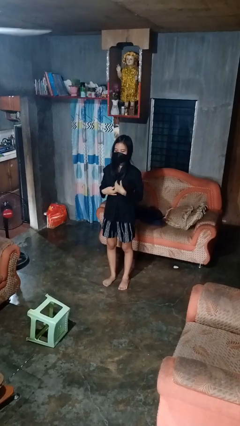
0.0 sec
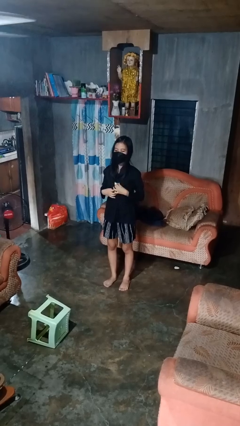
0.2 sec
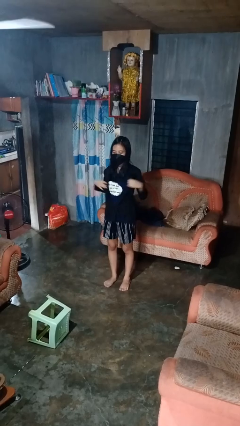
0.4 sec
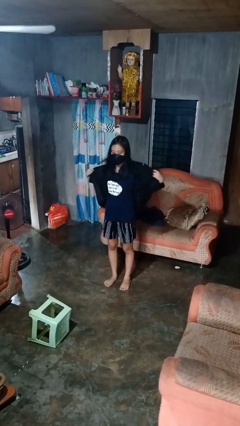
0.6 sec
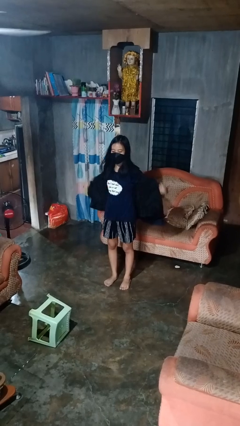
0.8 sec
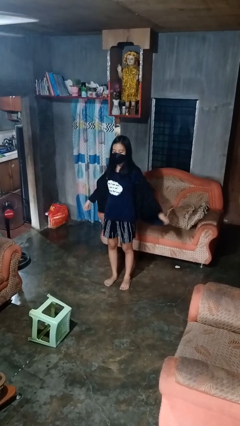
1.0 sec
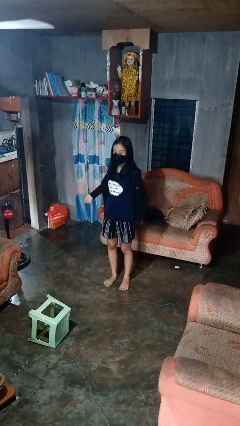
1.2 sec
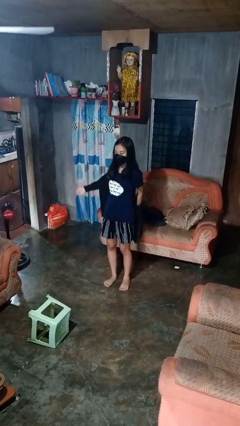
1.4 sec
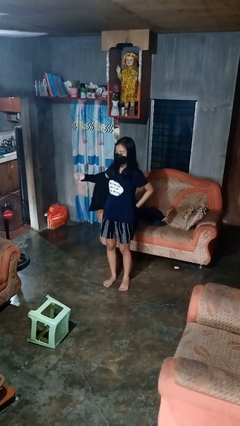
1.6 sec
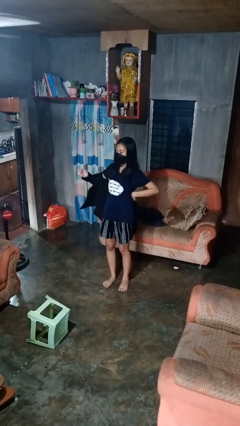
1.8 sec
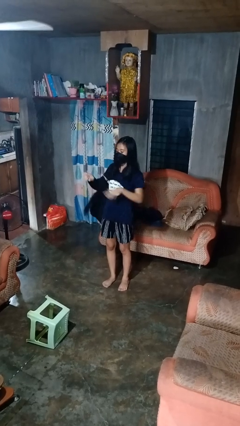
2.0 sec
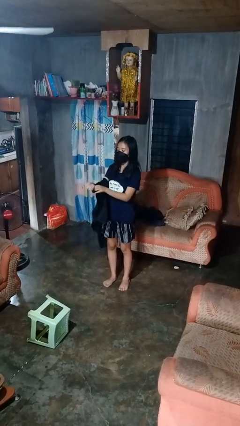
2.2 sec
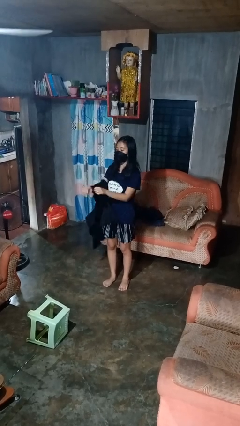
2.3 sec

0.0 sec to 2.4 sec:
person takes off shirt

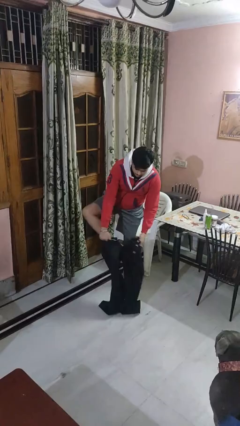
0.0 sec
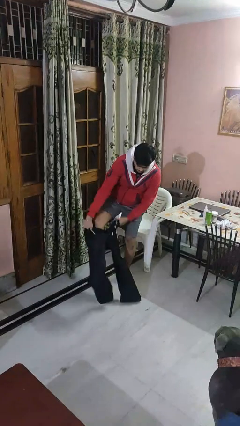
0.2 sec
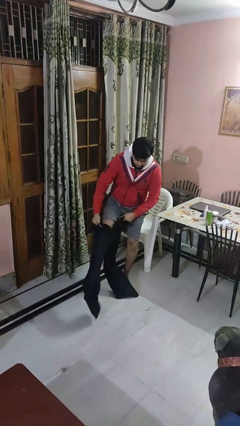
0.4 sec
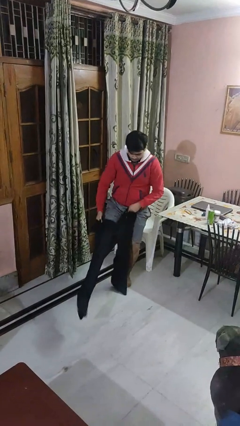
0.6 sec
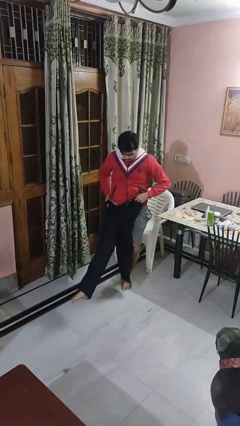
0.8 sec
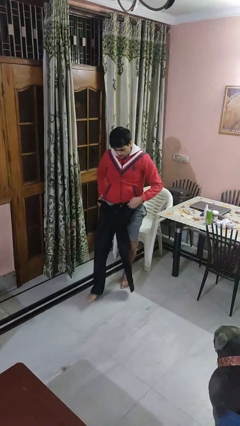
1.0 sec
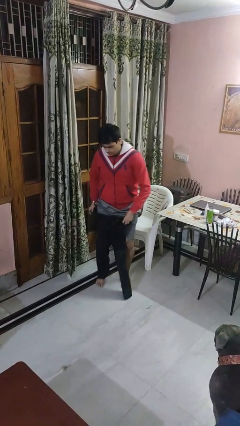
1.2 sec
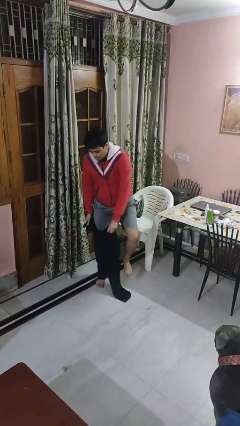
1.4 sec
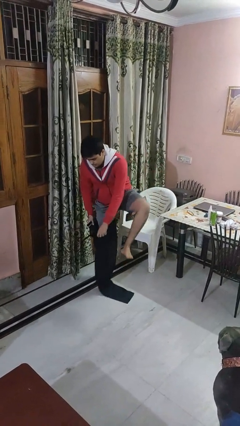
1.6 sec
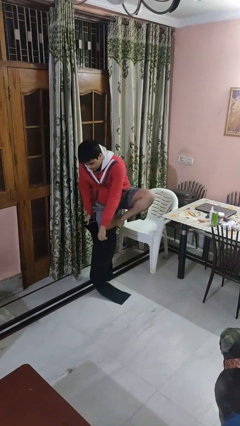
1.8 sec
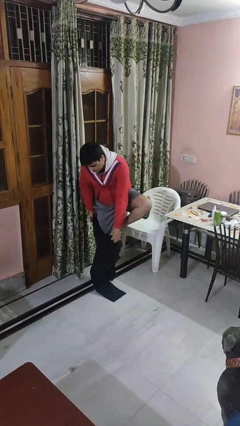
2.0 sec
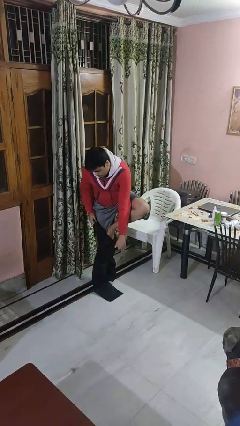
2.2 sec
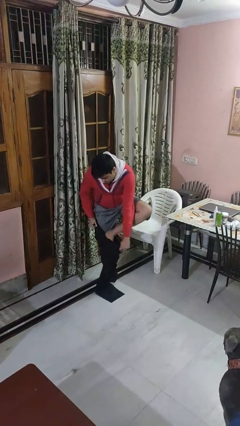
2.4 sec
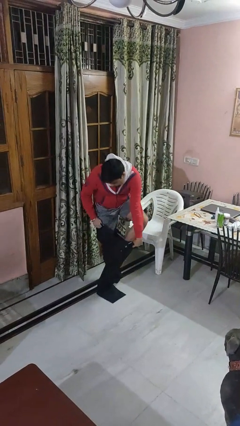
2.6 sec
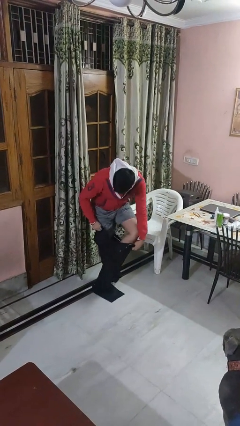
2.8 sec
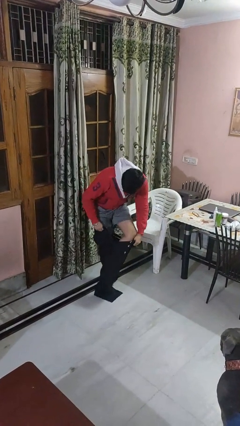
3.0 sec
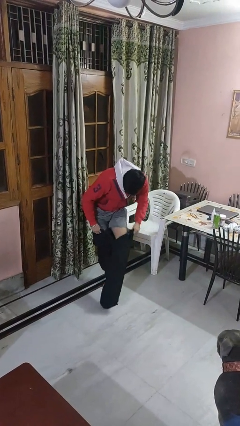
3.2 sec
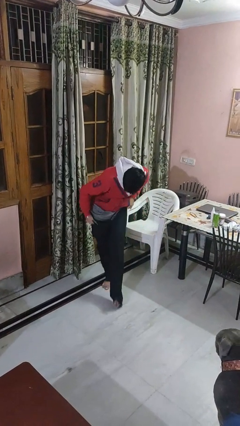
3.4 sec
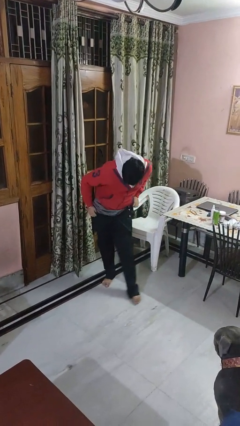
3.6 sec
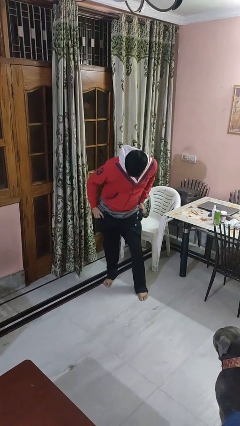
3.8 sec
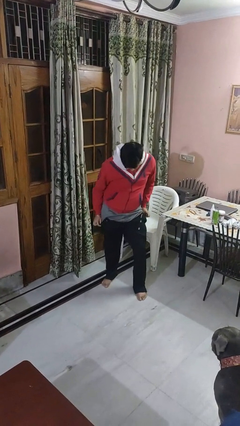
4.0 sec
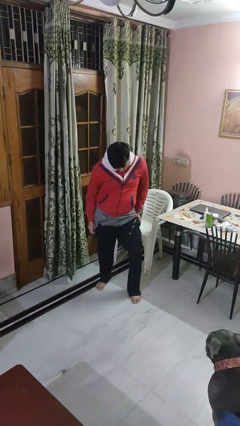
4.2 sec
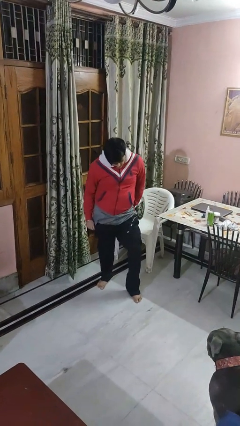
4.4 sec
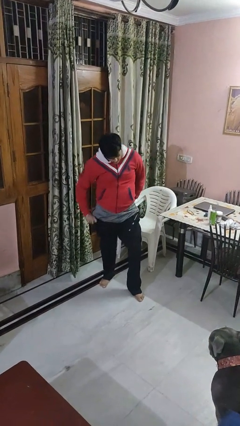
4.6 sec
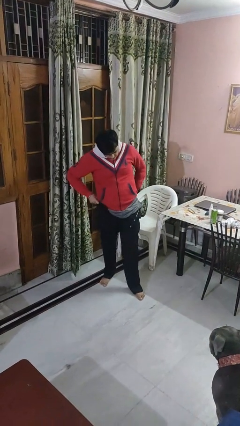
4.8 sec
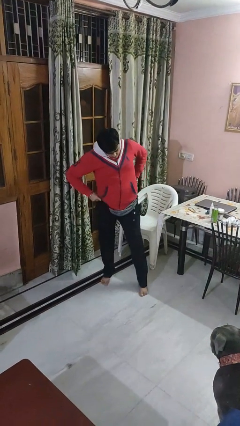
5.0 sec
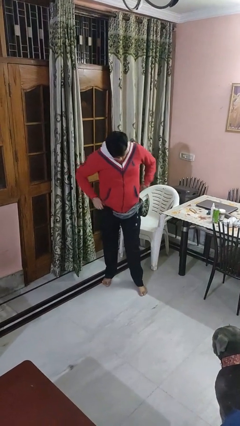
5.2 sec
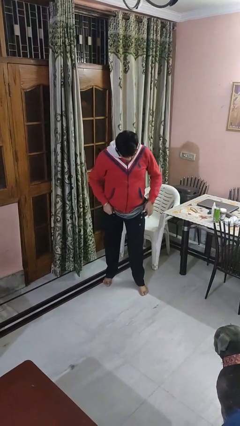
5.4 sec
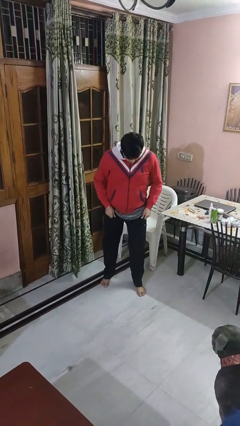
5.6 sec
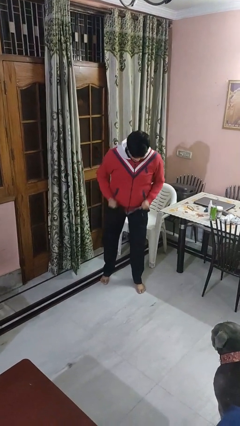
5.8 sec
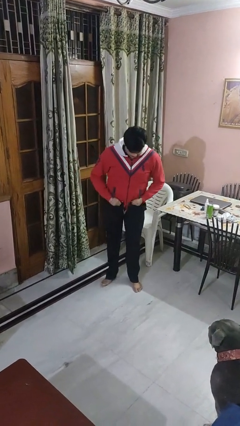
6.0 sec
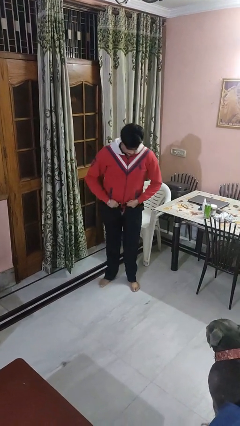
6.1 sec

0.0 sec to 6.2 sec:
person puts on pants

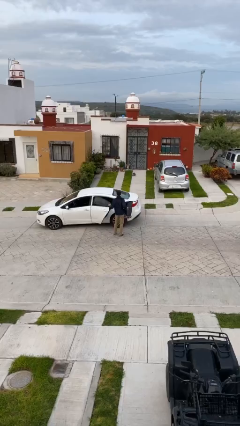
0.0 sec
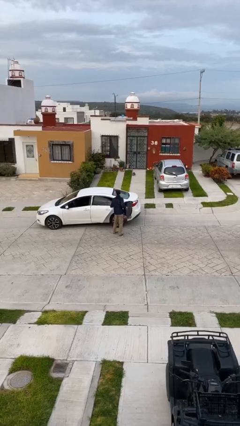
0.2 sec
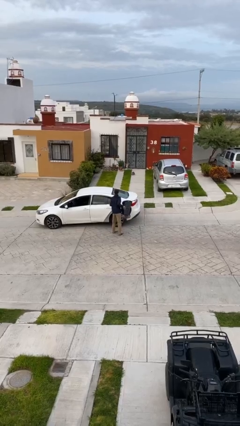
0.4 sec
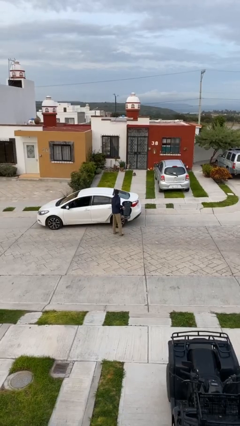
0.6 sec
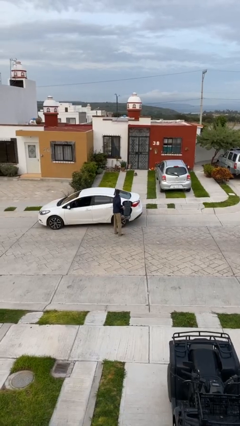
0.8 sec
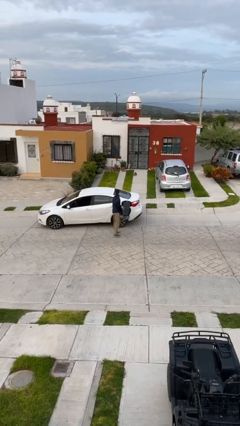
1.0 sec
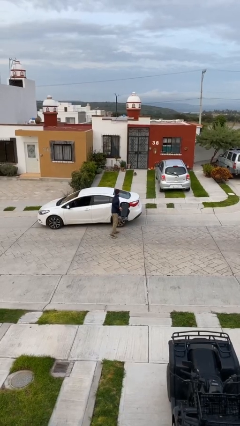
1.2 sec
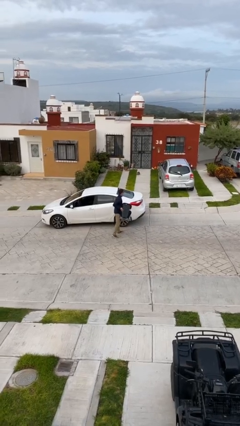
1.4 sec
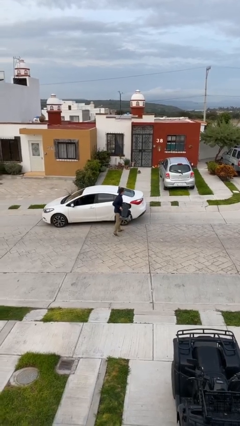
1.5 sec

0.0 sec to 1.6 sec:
person closes car door

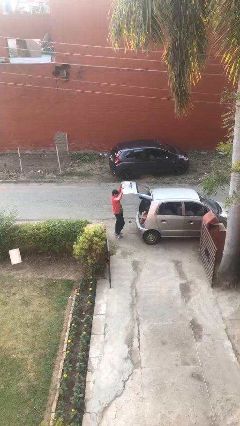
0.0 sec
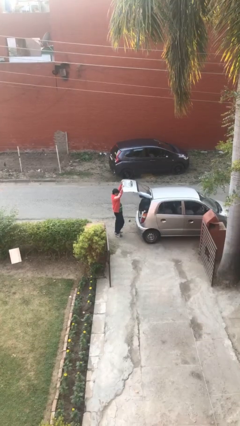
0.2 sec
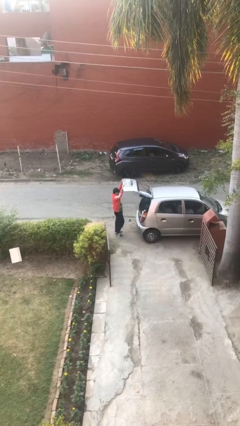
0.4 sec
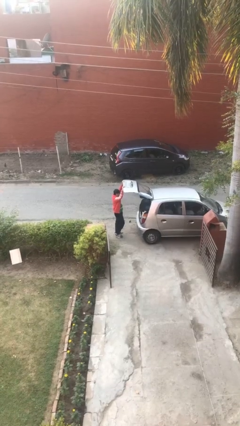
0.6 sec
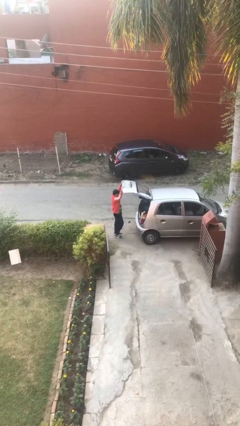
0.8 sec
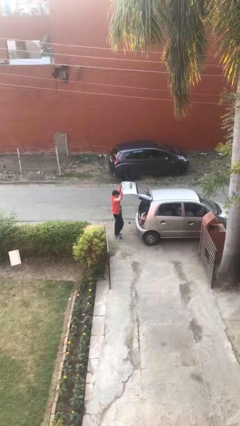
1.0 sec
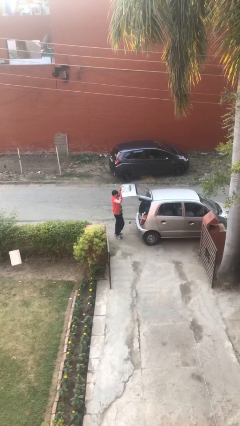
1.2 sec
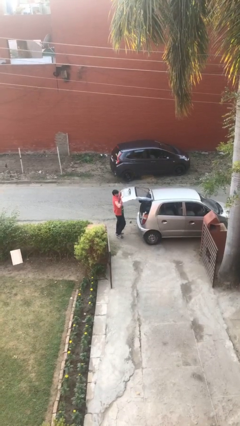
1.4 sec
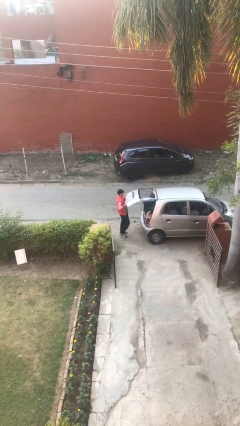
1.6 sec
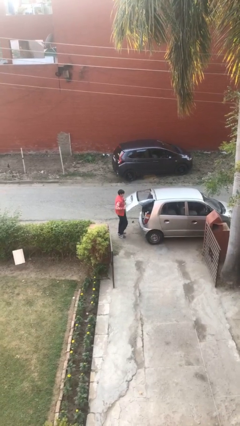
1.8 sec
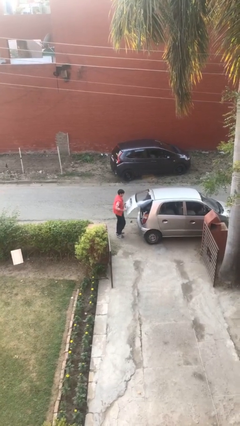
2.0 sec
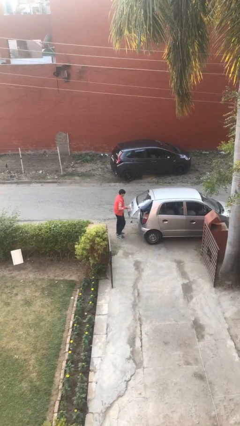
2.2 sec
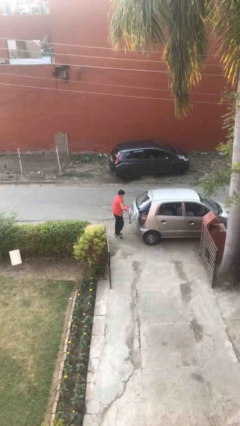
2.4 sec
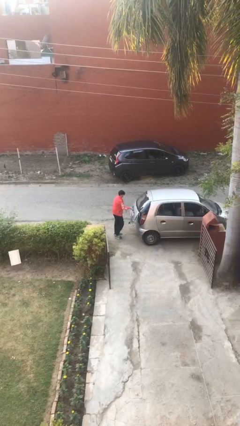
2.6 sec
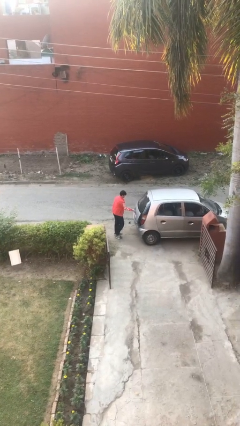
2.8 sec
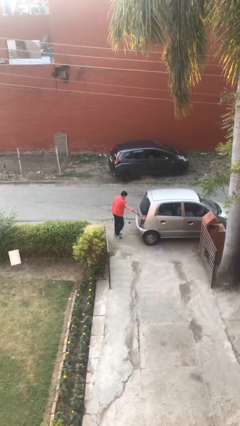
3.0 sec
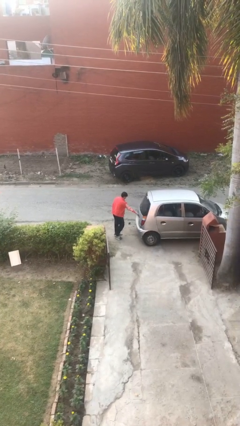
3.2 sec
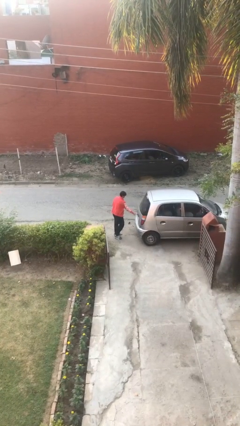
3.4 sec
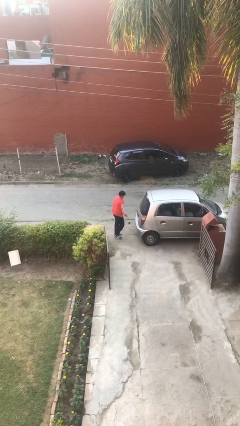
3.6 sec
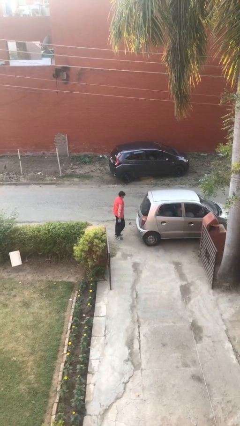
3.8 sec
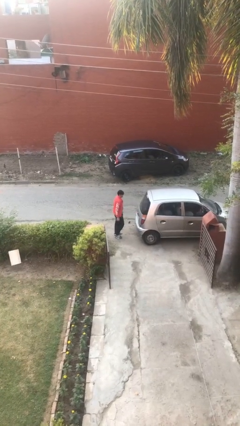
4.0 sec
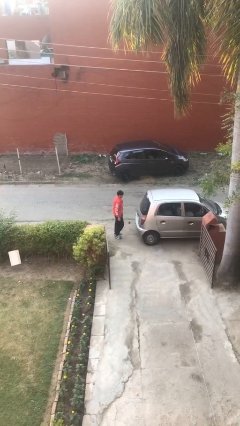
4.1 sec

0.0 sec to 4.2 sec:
person closes car trunk

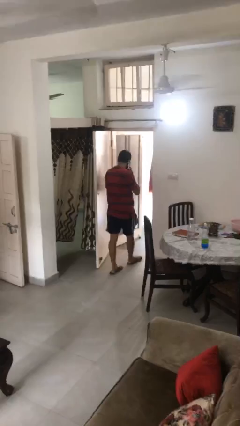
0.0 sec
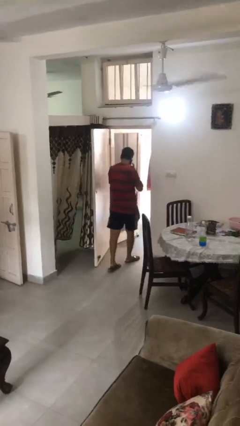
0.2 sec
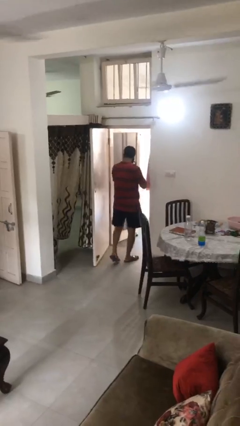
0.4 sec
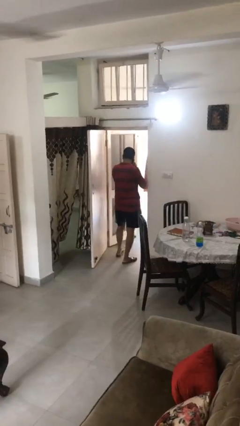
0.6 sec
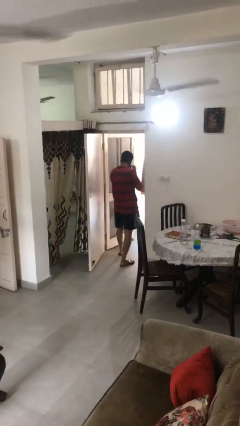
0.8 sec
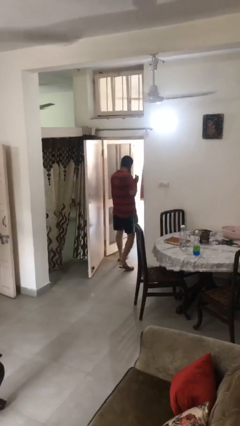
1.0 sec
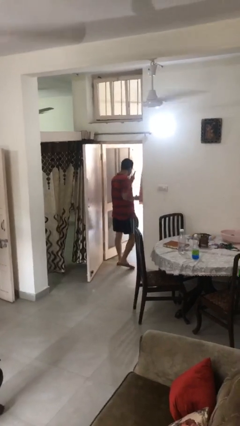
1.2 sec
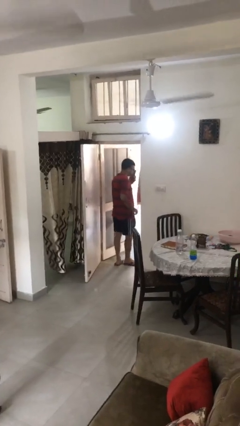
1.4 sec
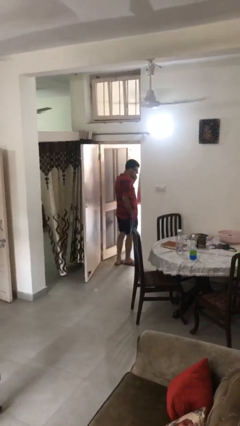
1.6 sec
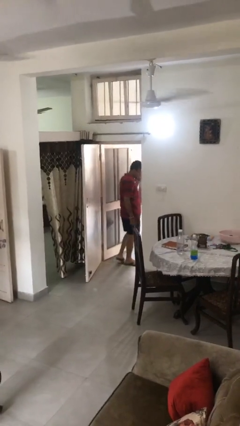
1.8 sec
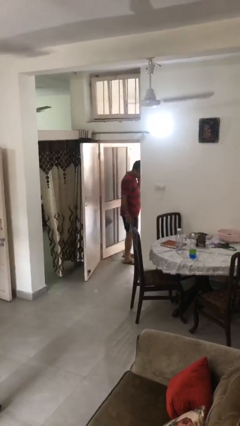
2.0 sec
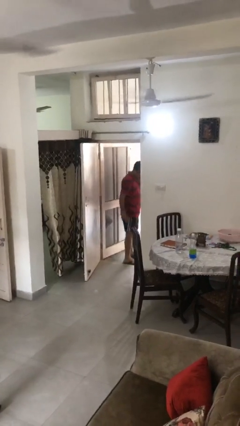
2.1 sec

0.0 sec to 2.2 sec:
person exits scene through structure

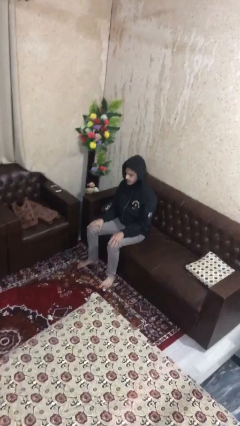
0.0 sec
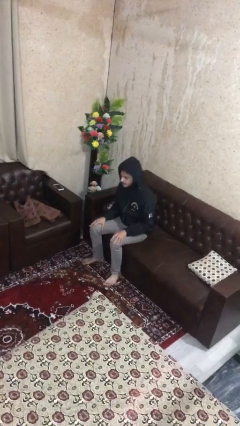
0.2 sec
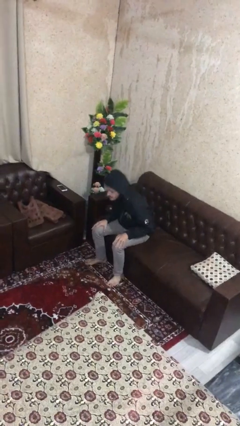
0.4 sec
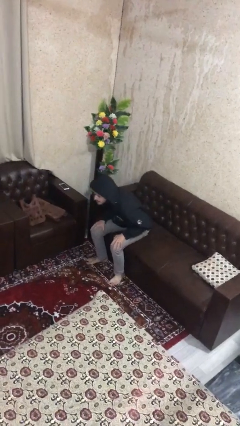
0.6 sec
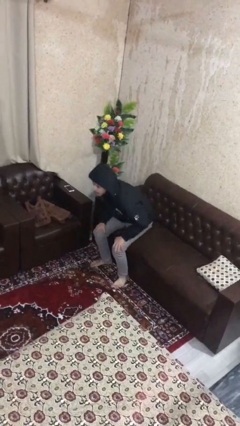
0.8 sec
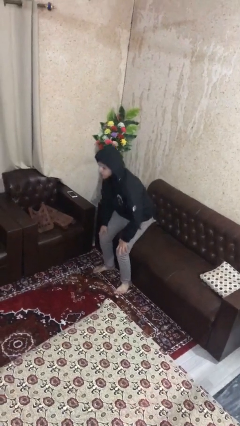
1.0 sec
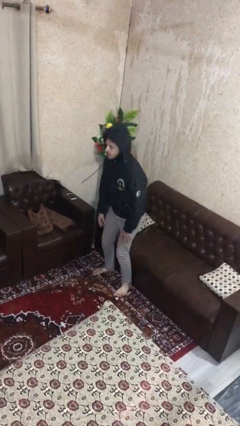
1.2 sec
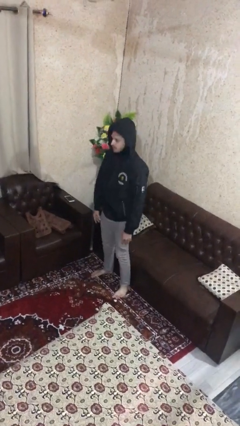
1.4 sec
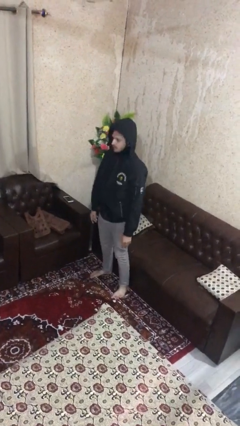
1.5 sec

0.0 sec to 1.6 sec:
person stands up
